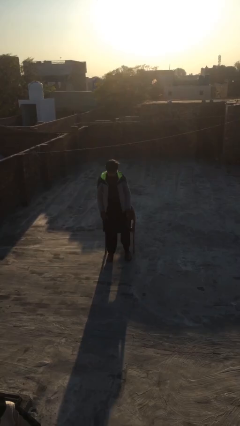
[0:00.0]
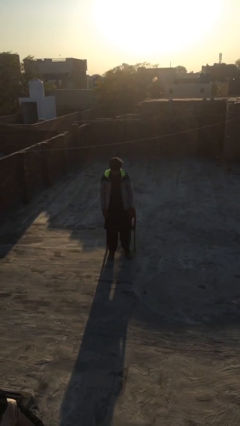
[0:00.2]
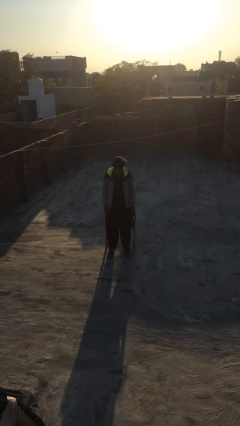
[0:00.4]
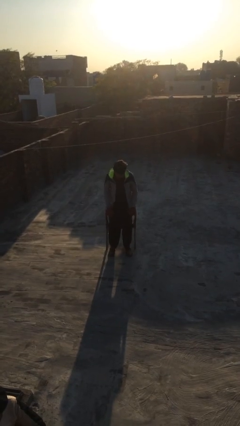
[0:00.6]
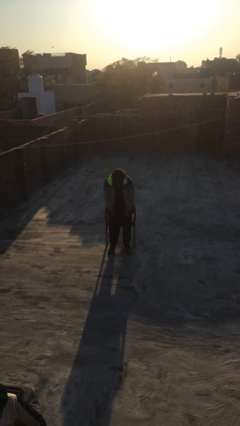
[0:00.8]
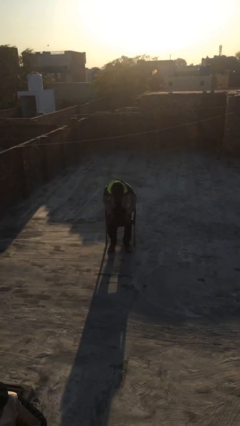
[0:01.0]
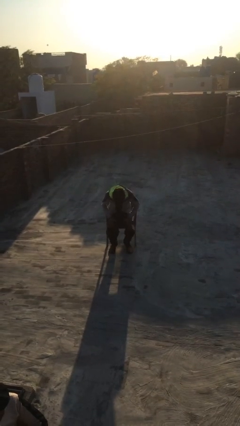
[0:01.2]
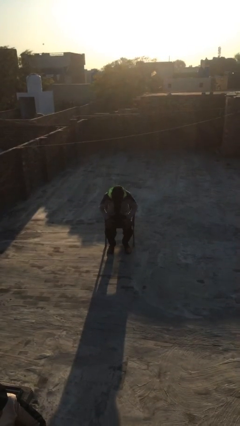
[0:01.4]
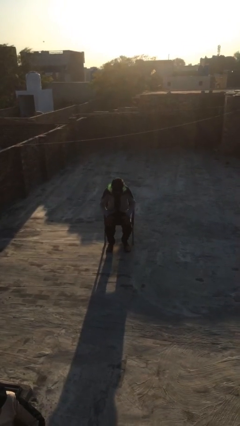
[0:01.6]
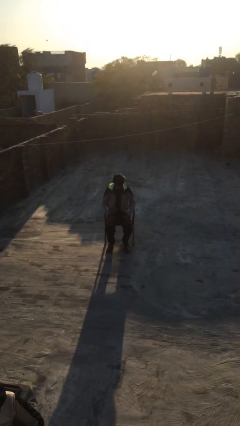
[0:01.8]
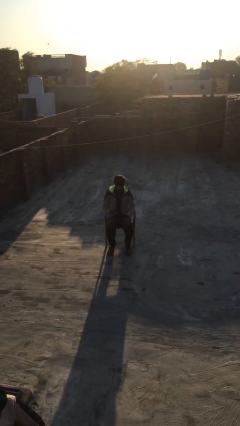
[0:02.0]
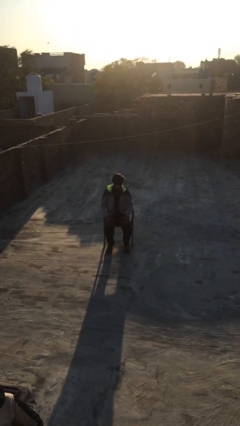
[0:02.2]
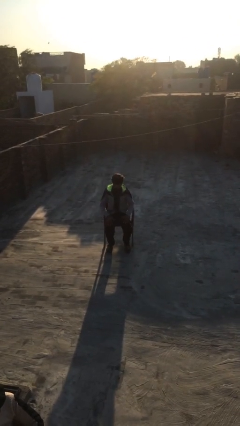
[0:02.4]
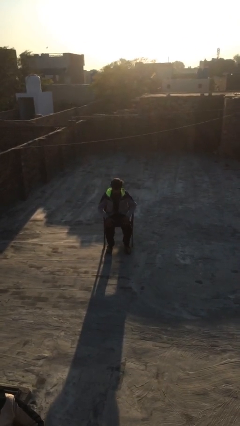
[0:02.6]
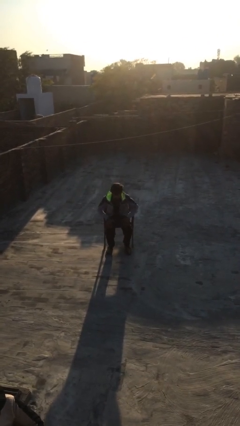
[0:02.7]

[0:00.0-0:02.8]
person sits down

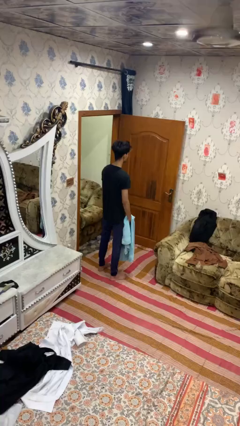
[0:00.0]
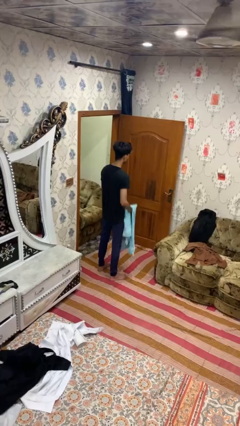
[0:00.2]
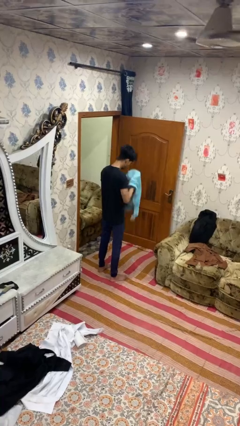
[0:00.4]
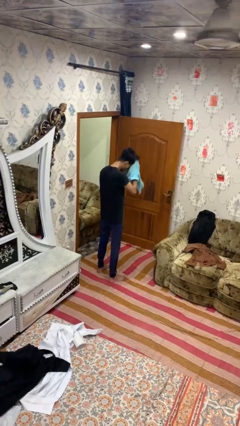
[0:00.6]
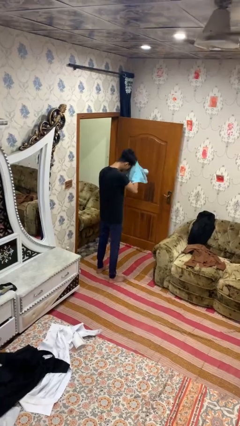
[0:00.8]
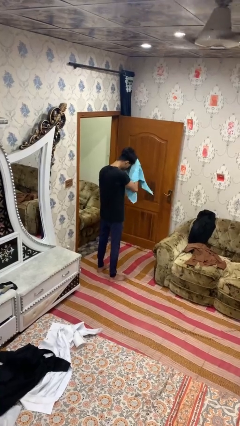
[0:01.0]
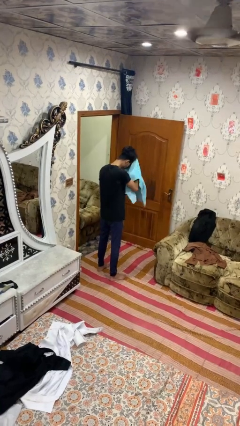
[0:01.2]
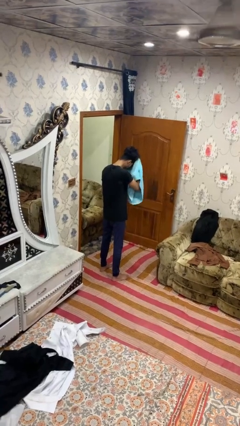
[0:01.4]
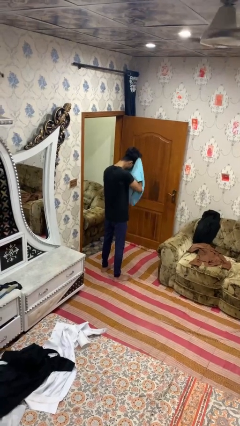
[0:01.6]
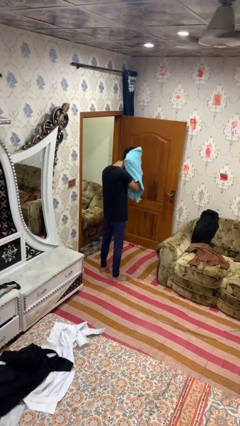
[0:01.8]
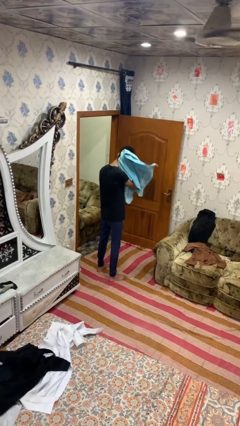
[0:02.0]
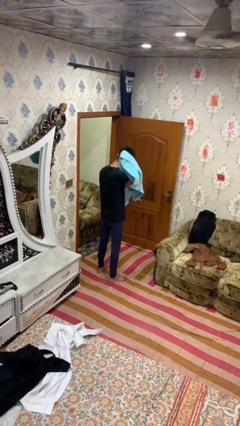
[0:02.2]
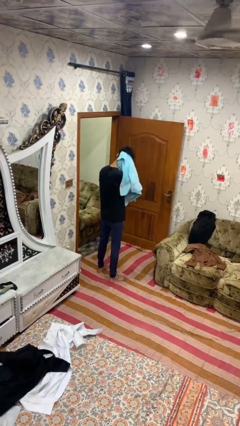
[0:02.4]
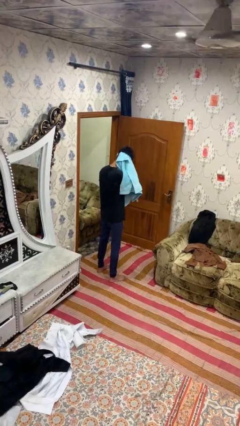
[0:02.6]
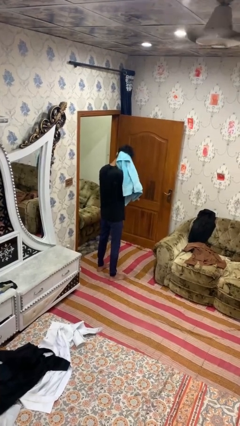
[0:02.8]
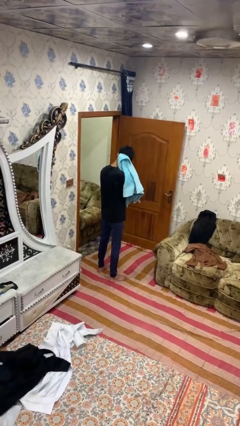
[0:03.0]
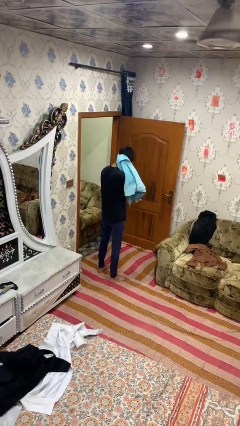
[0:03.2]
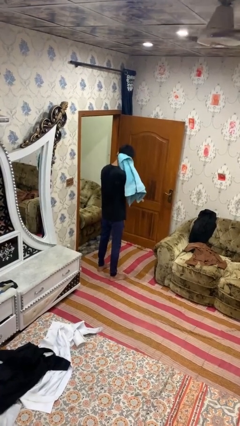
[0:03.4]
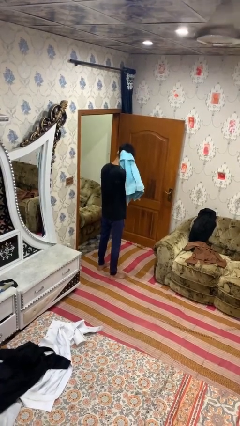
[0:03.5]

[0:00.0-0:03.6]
person dries hair with towel

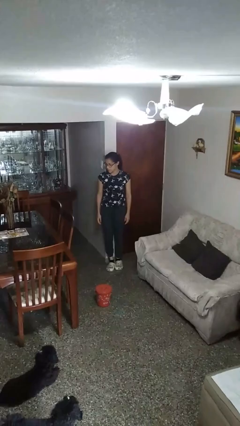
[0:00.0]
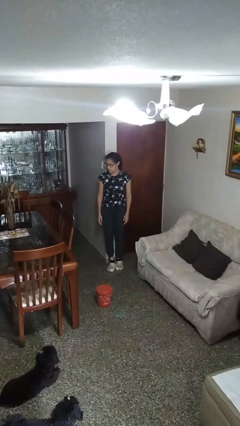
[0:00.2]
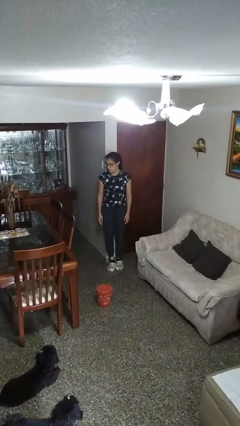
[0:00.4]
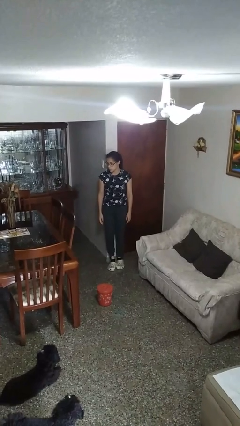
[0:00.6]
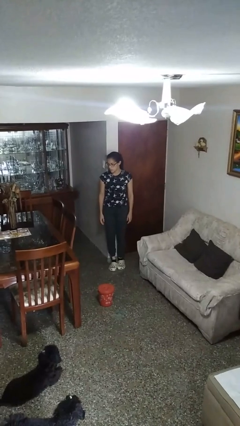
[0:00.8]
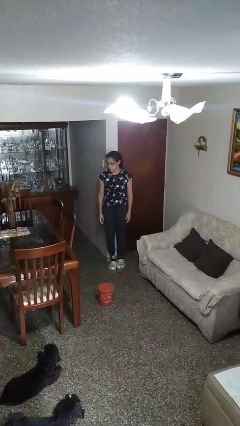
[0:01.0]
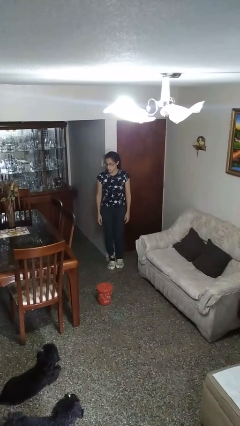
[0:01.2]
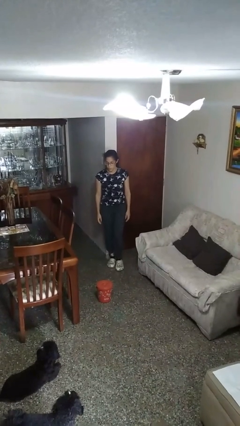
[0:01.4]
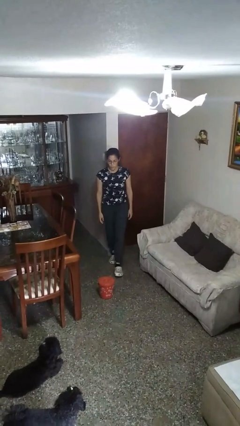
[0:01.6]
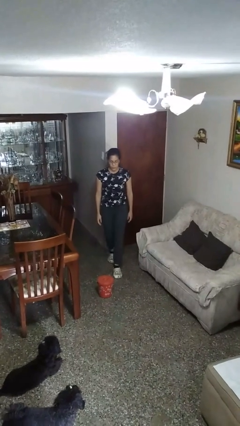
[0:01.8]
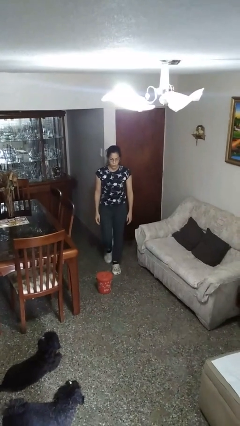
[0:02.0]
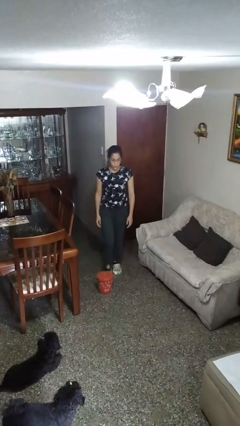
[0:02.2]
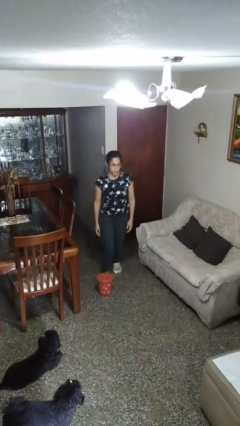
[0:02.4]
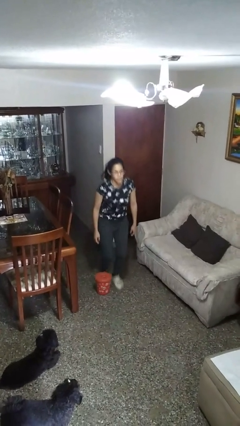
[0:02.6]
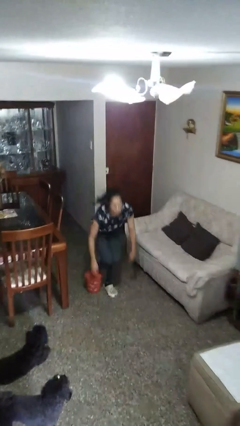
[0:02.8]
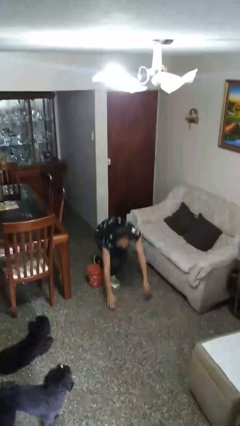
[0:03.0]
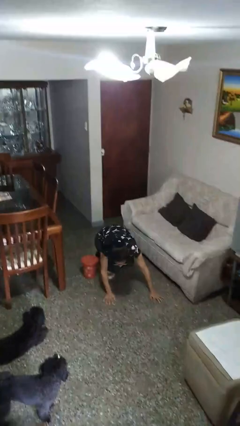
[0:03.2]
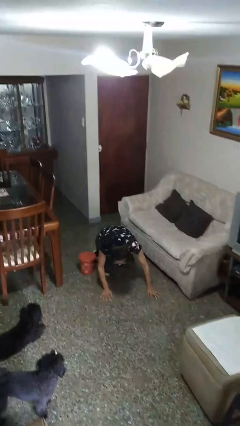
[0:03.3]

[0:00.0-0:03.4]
person trips on object on floor

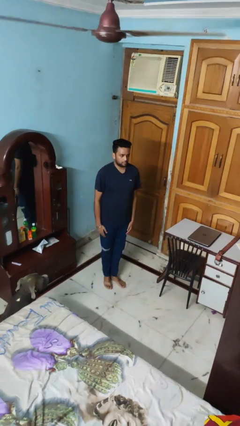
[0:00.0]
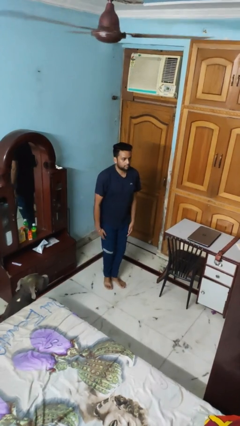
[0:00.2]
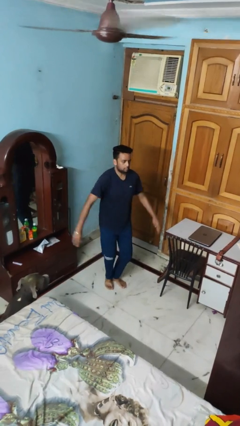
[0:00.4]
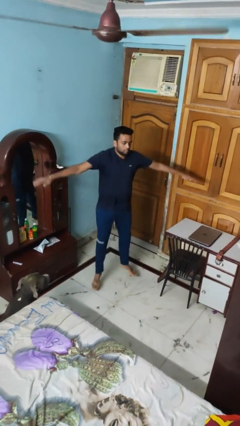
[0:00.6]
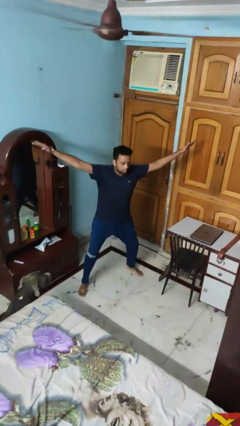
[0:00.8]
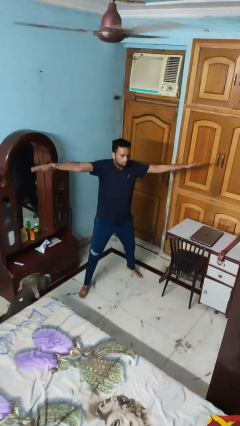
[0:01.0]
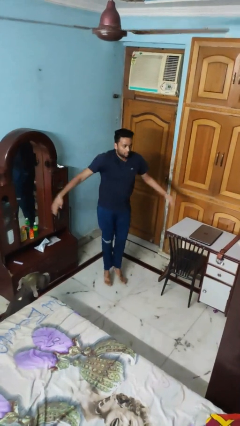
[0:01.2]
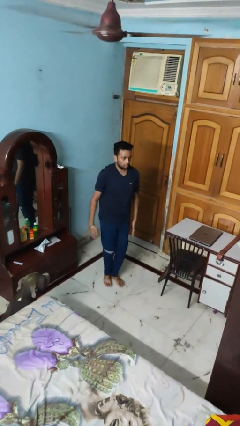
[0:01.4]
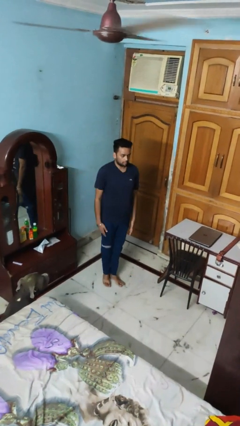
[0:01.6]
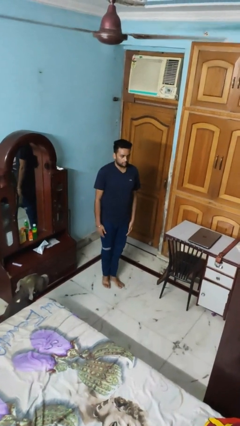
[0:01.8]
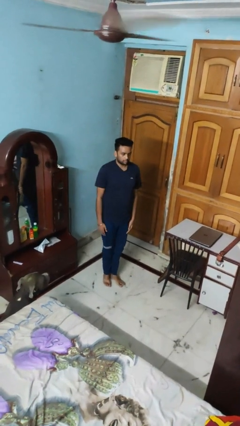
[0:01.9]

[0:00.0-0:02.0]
person exercises with jumping jacks

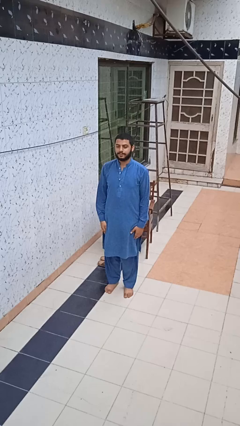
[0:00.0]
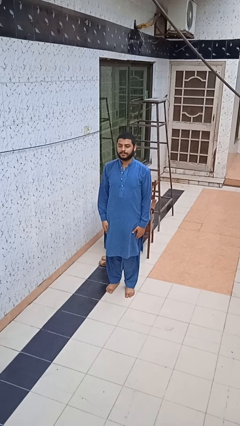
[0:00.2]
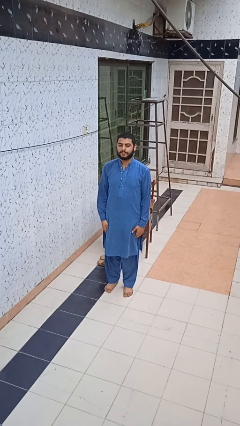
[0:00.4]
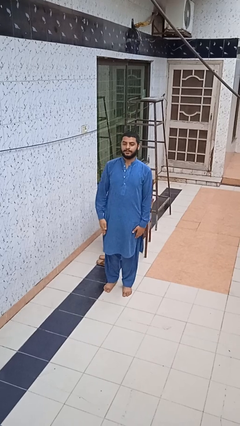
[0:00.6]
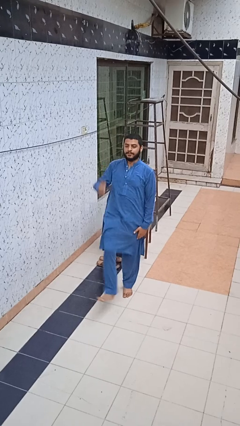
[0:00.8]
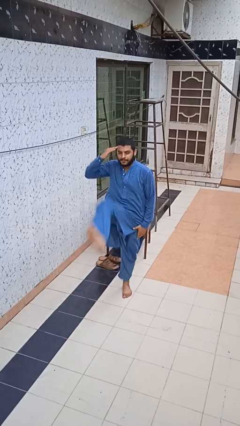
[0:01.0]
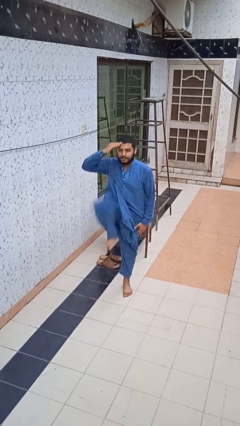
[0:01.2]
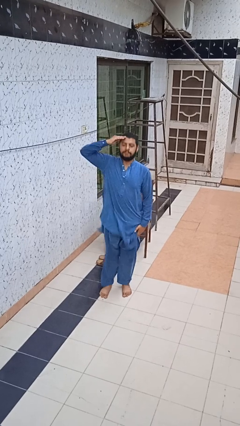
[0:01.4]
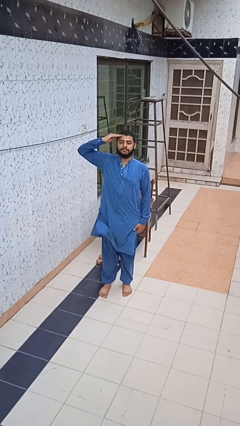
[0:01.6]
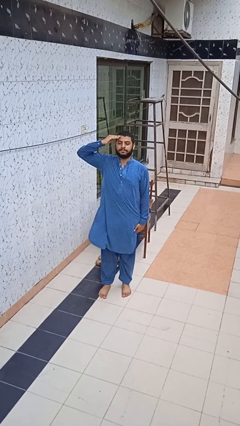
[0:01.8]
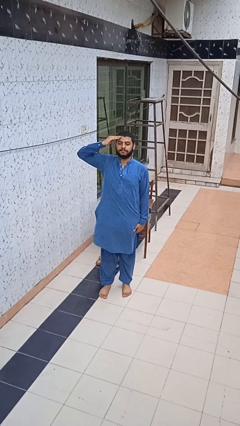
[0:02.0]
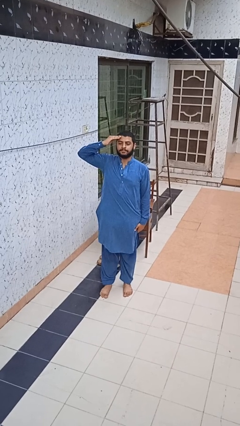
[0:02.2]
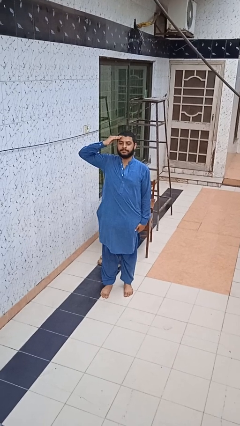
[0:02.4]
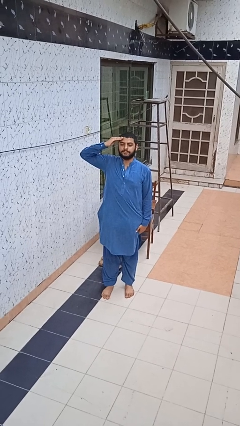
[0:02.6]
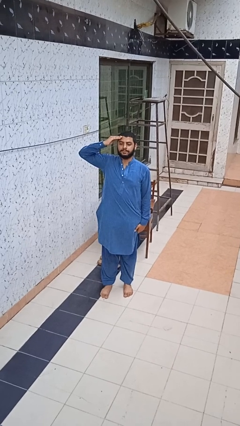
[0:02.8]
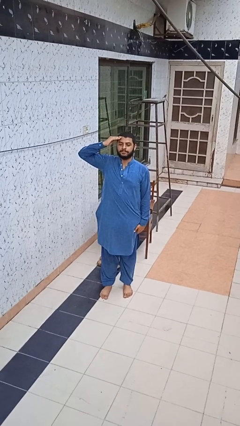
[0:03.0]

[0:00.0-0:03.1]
person salutes

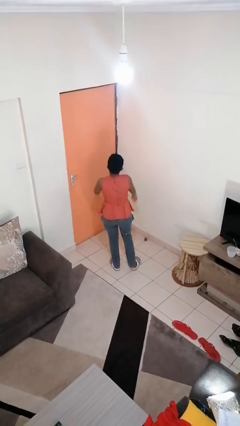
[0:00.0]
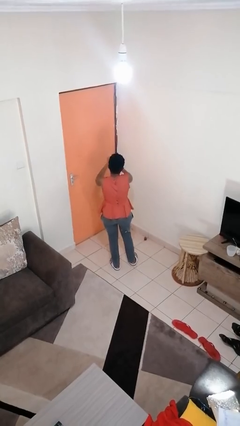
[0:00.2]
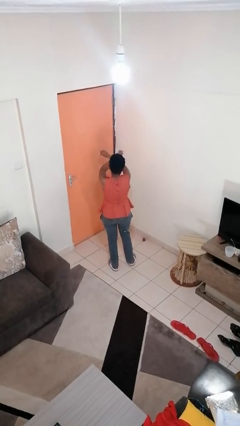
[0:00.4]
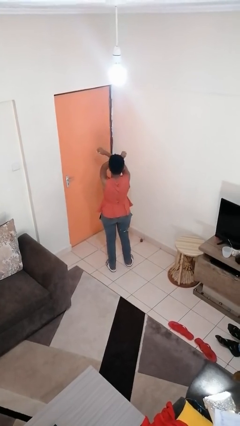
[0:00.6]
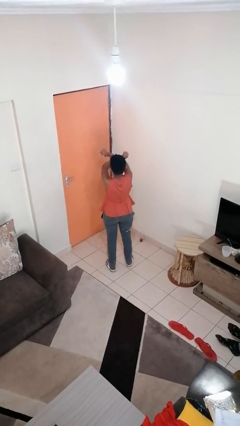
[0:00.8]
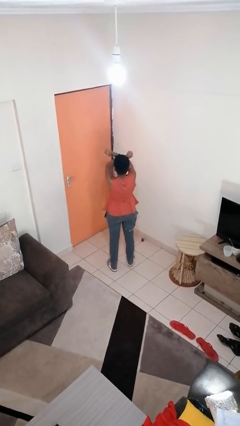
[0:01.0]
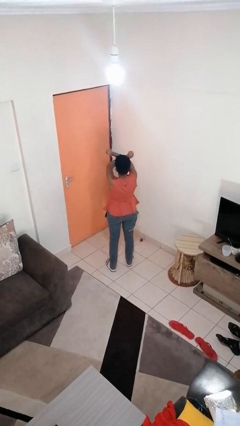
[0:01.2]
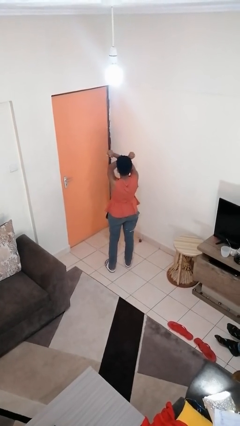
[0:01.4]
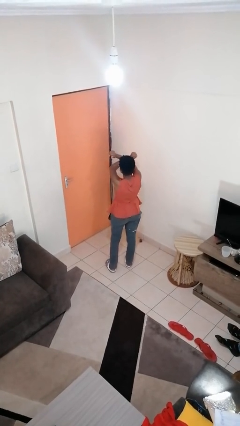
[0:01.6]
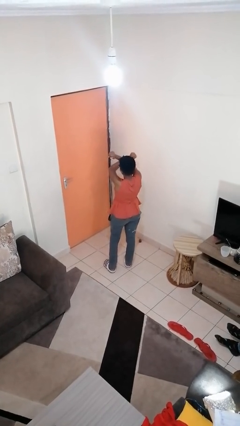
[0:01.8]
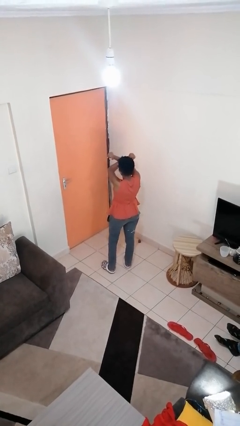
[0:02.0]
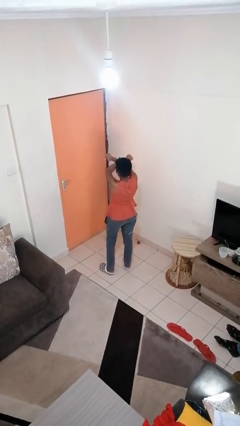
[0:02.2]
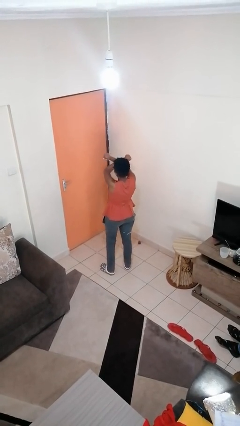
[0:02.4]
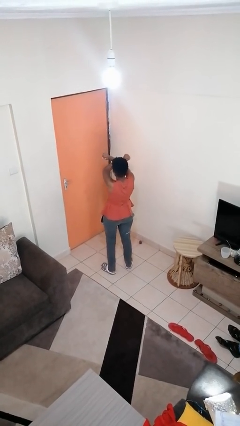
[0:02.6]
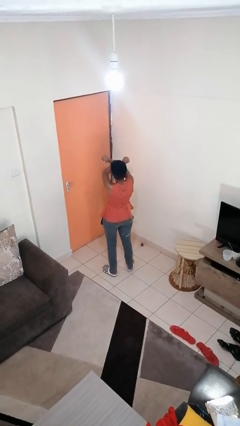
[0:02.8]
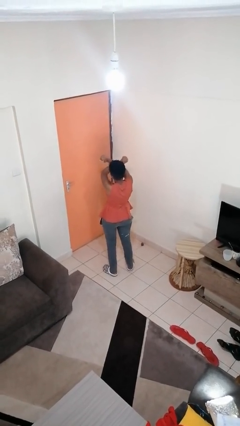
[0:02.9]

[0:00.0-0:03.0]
person gestures arms x
